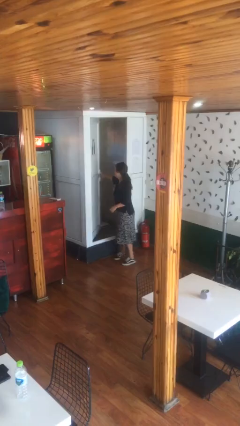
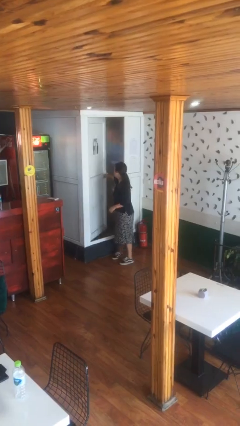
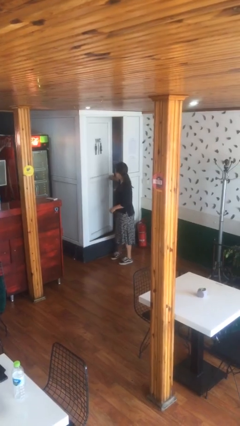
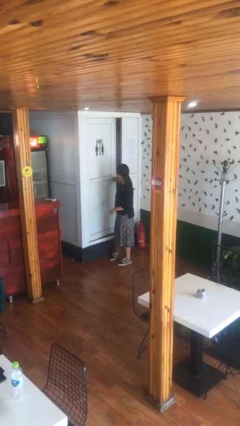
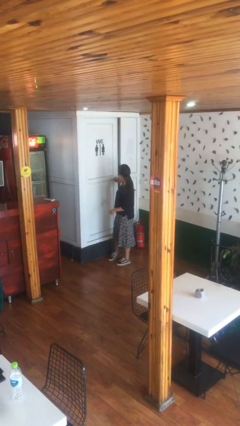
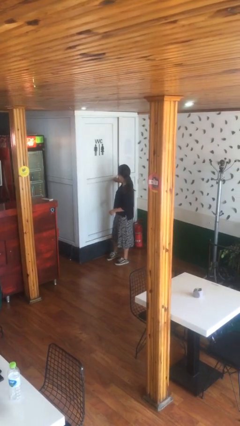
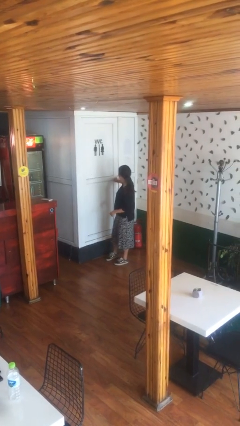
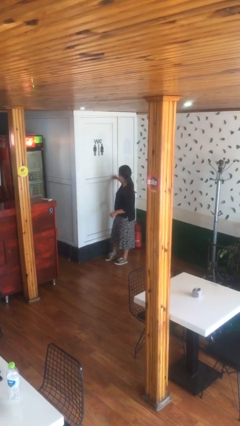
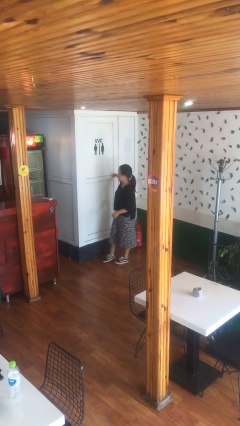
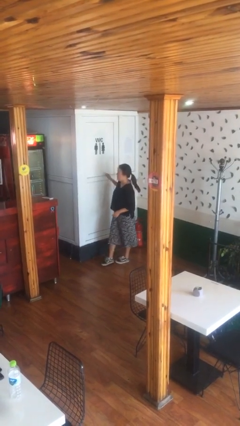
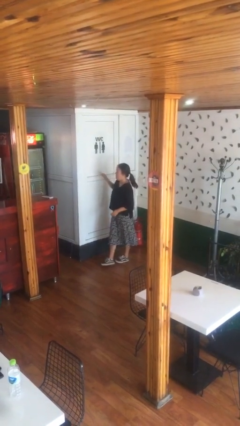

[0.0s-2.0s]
person closes facility door

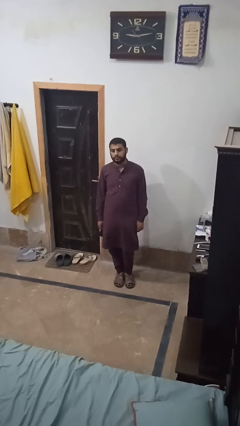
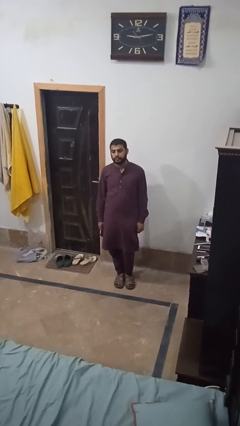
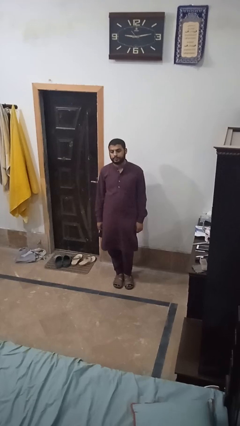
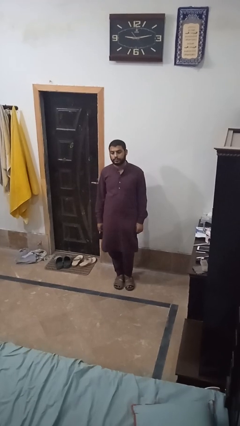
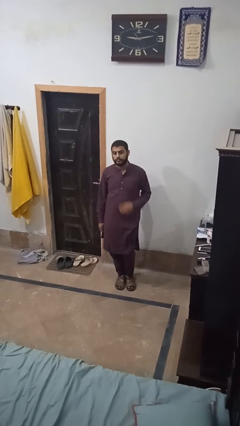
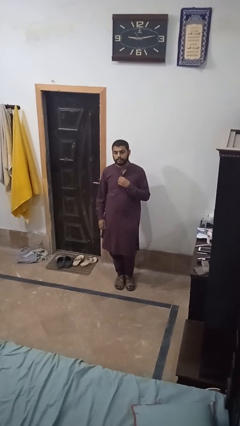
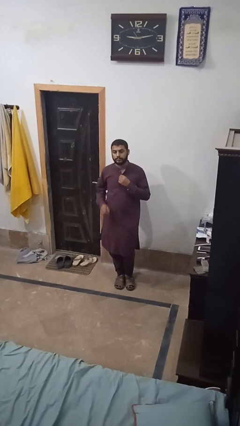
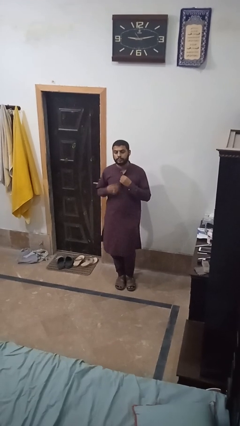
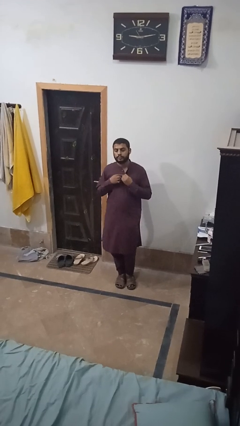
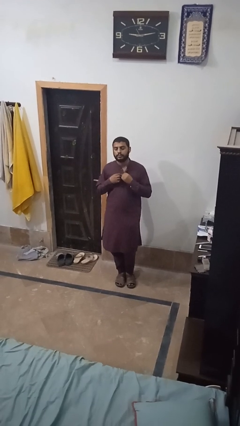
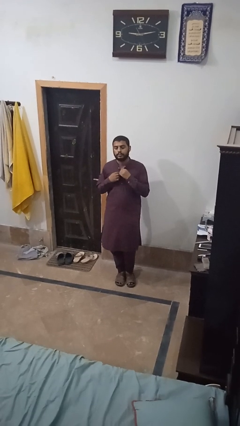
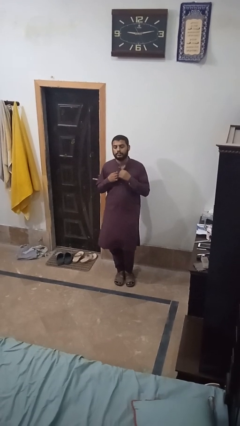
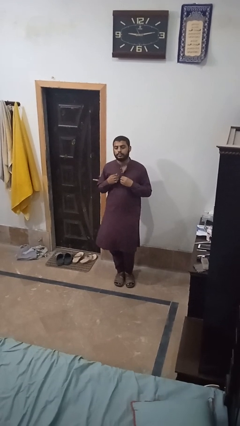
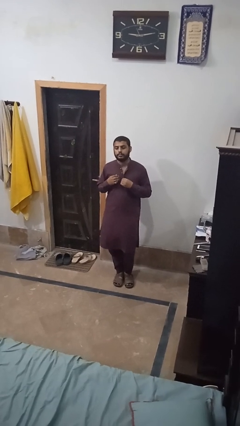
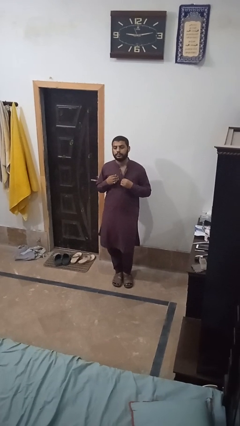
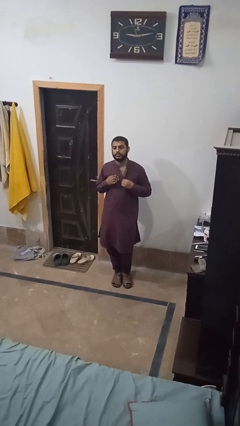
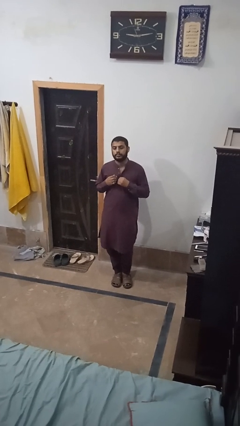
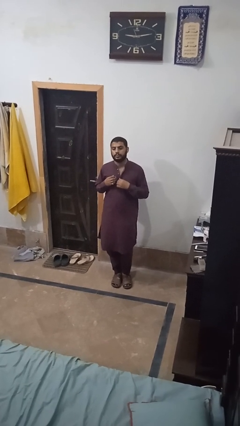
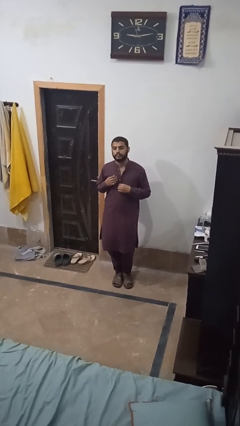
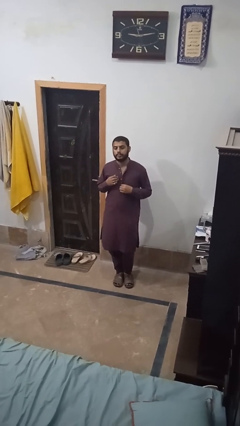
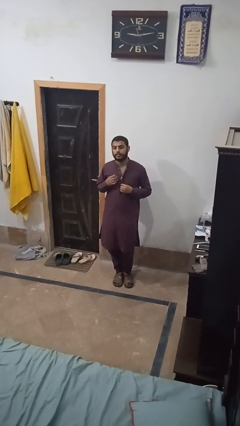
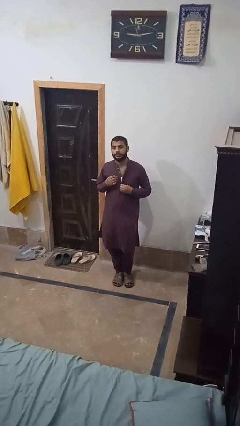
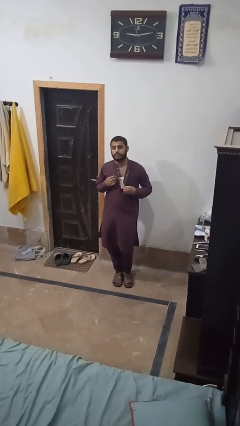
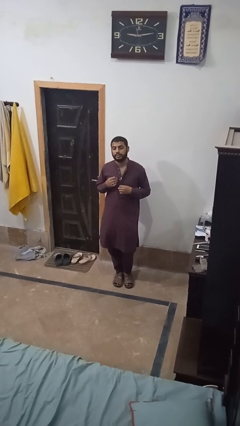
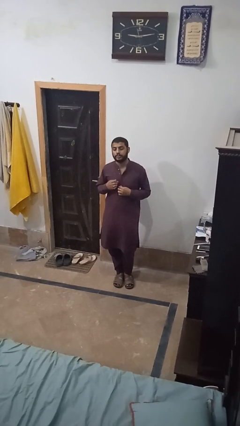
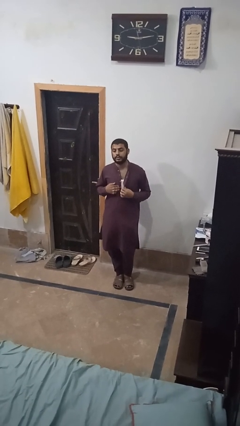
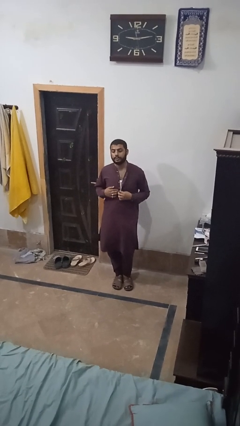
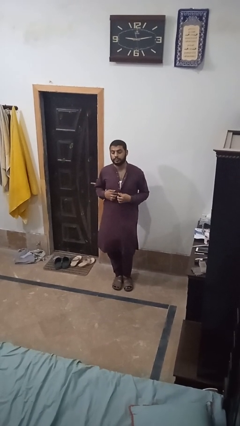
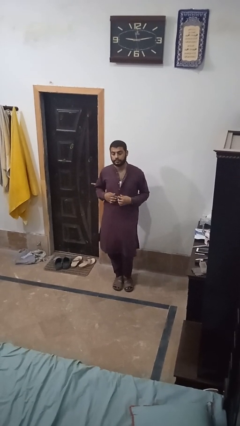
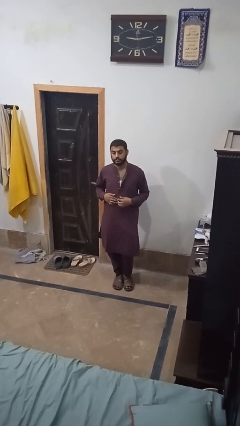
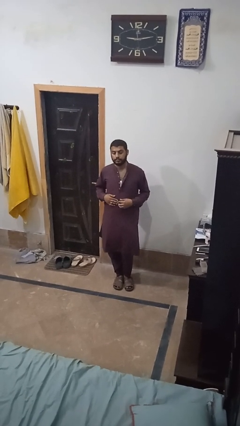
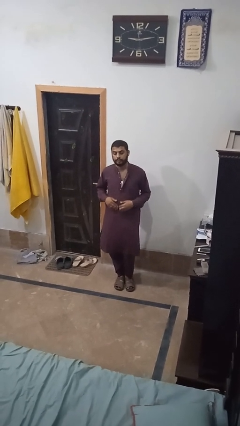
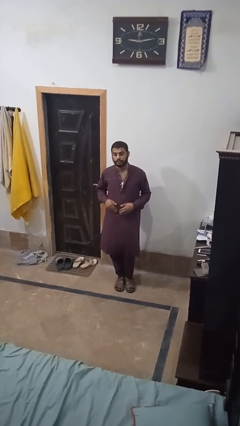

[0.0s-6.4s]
person unbuttons shirt

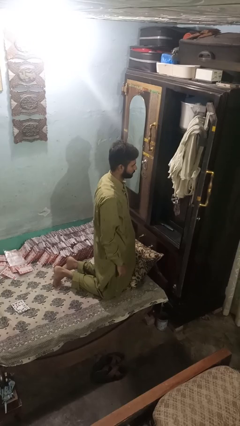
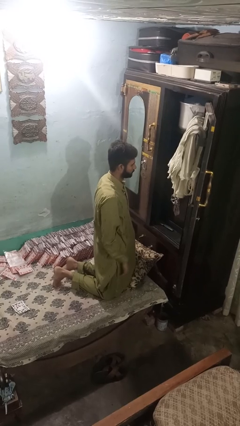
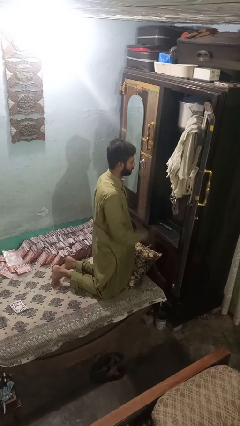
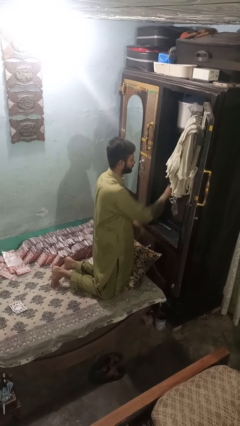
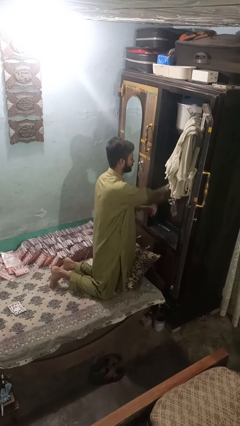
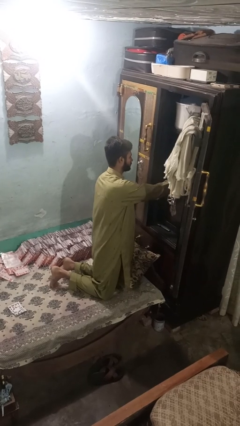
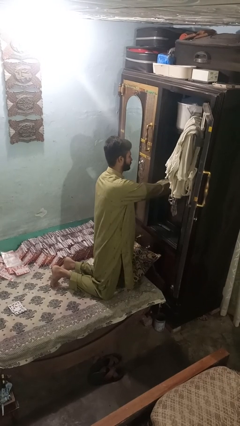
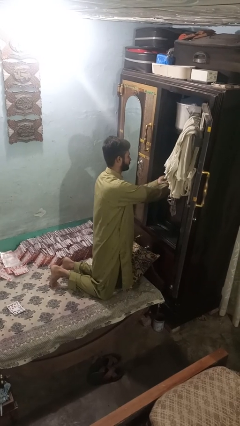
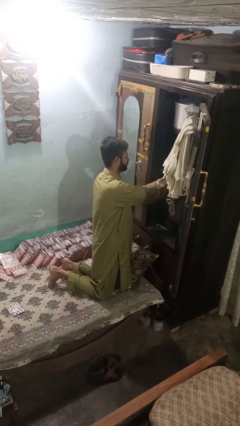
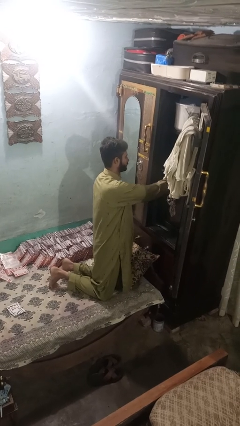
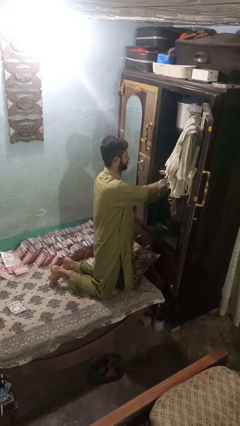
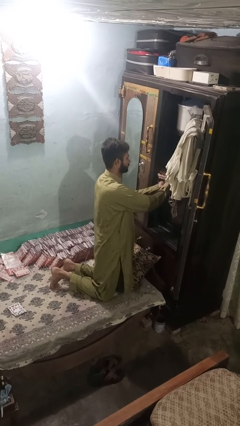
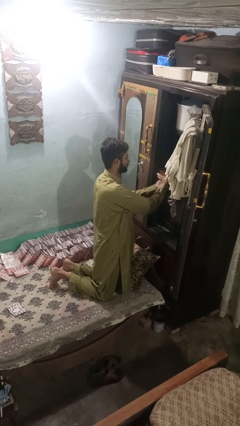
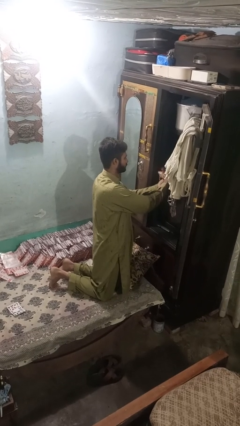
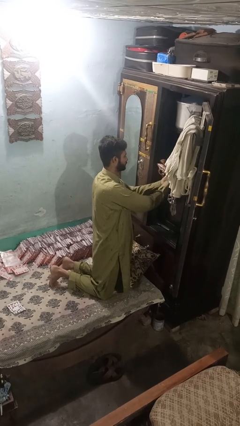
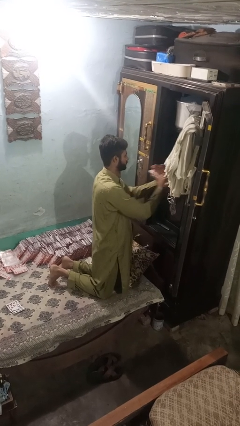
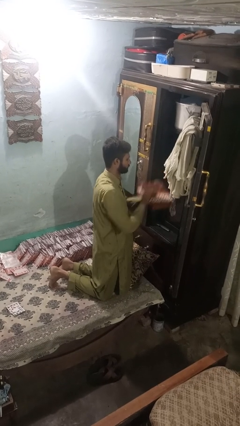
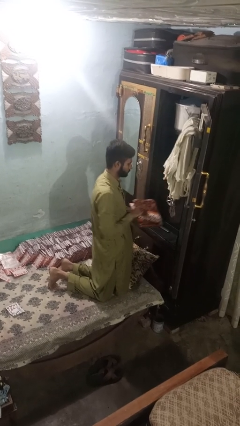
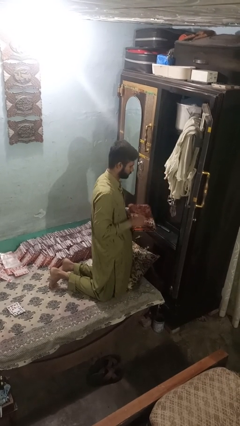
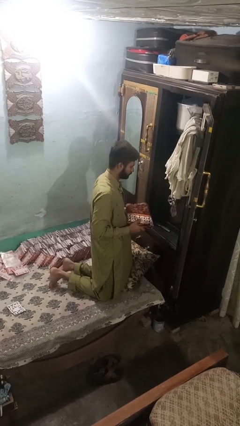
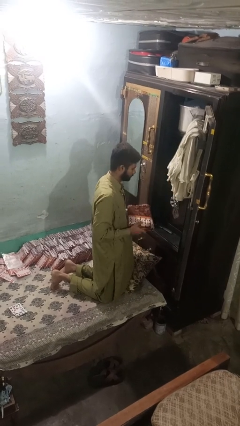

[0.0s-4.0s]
person takes clothes from dresser

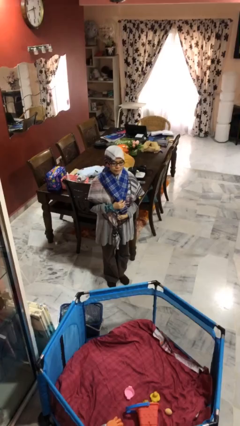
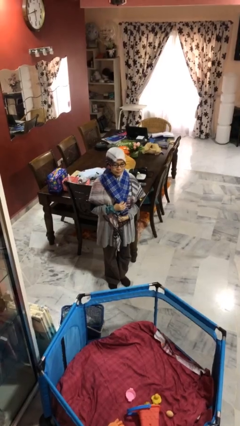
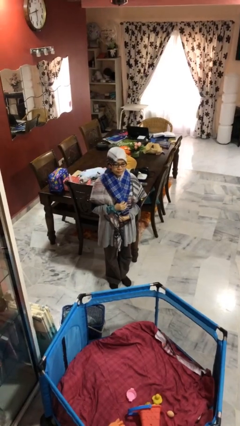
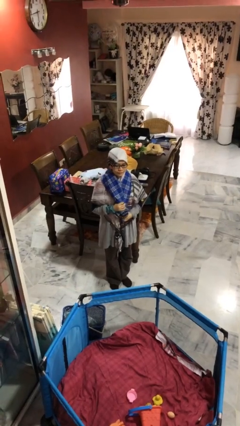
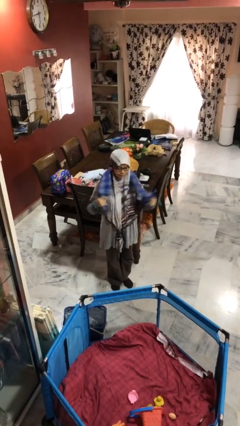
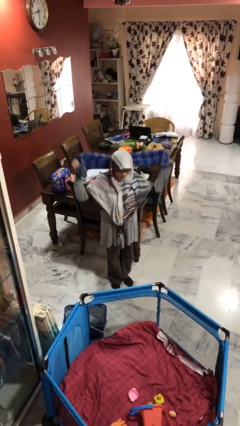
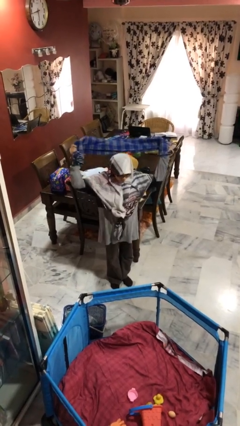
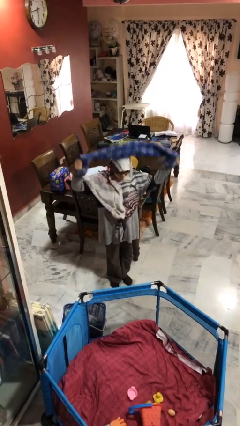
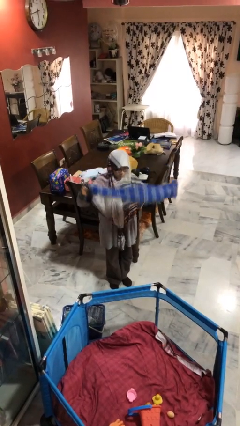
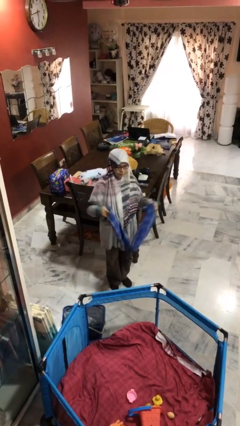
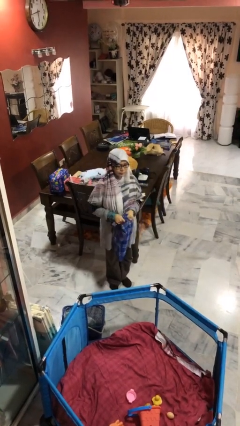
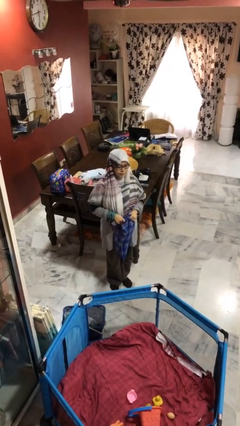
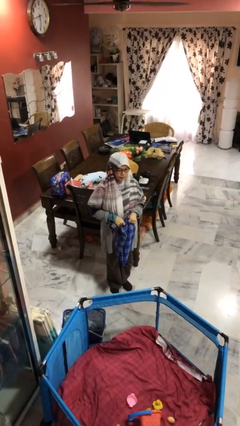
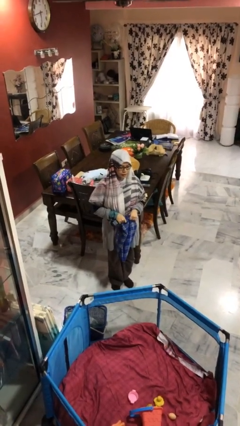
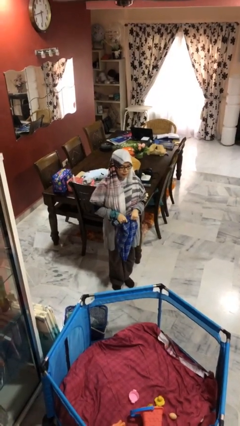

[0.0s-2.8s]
person takes off scarf

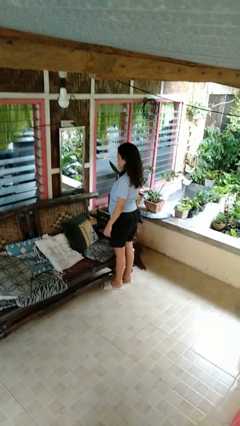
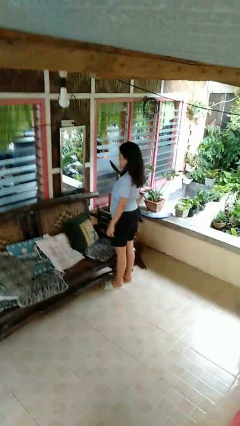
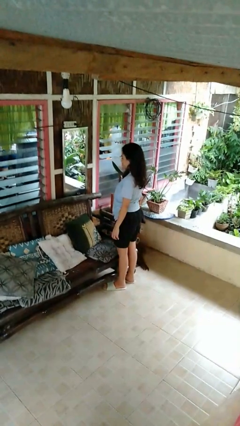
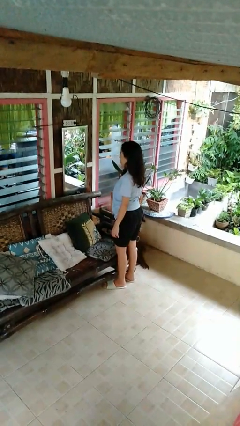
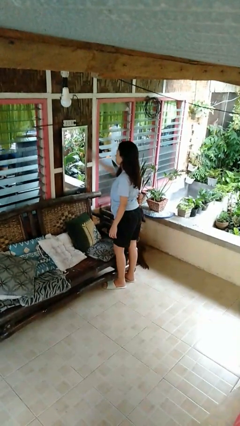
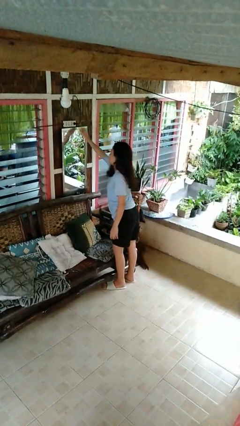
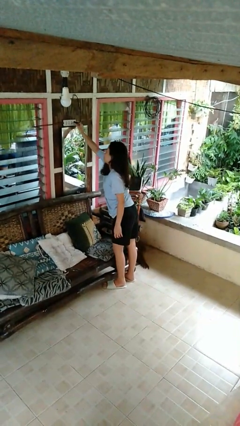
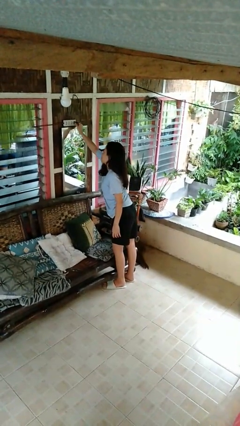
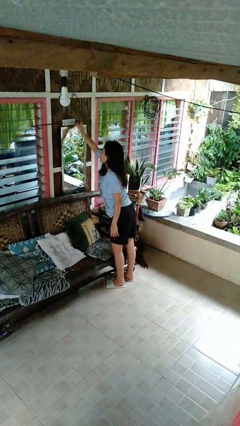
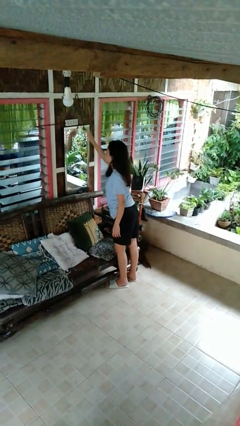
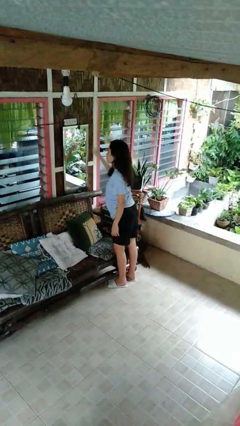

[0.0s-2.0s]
person unplugs from electrical socket

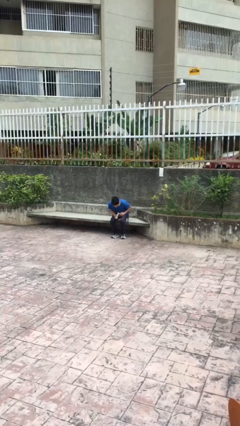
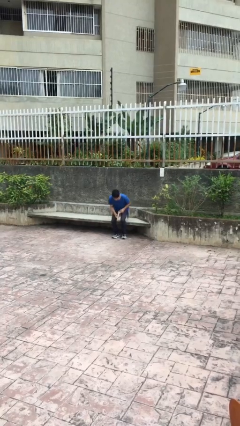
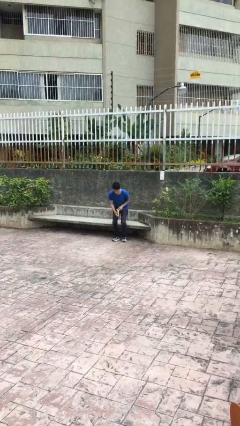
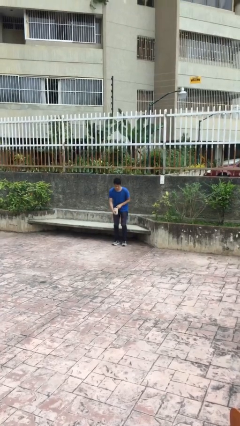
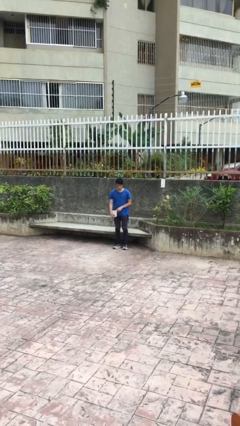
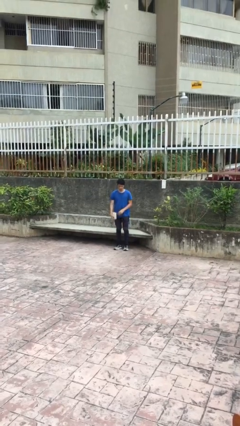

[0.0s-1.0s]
person stands up
